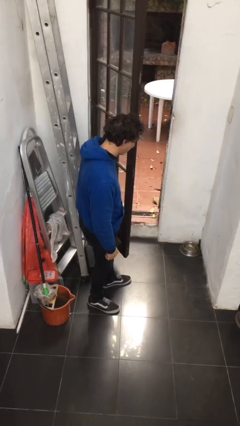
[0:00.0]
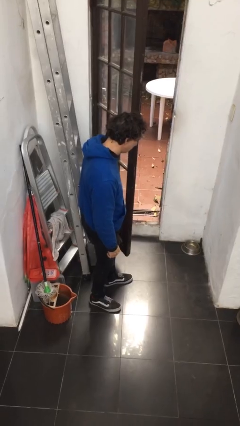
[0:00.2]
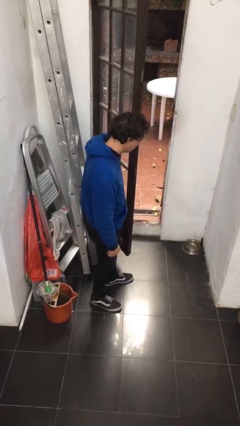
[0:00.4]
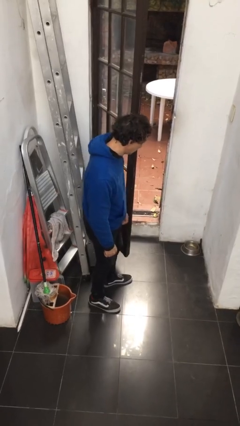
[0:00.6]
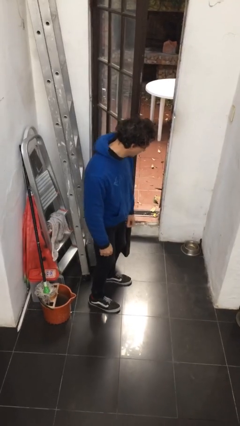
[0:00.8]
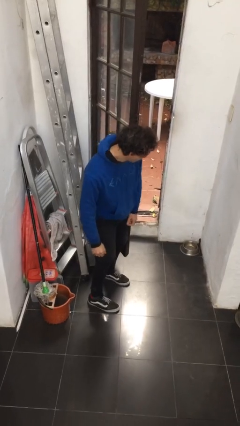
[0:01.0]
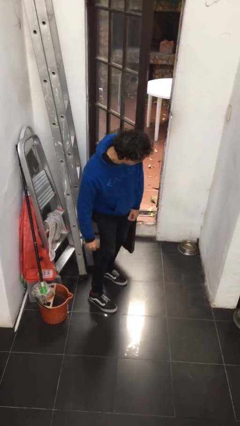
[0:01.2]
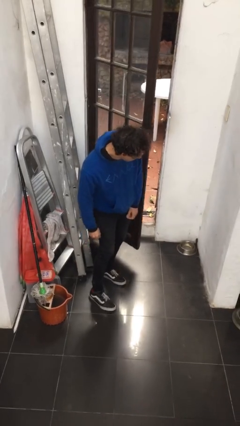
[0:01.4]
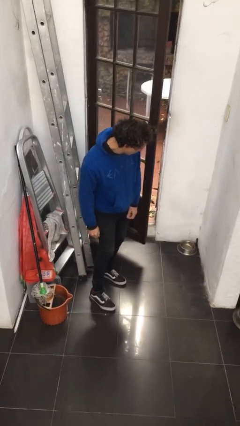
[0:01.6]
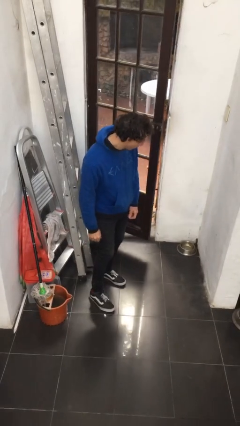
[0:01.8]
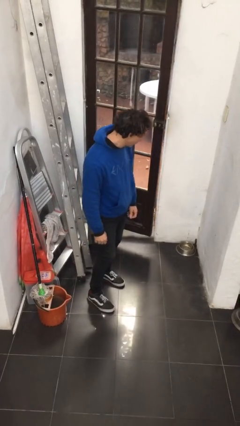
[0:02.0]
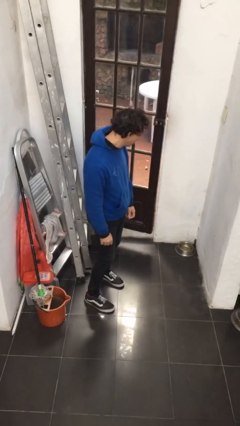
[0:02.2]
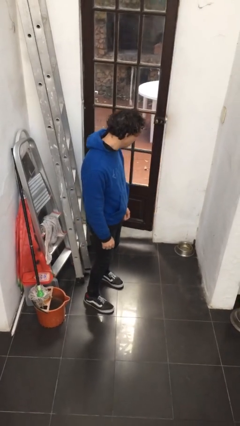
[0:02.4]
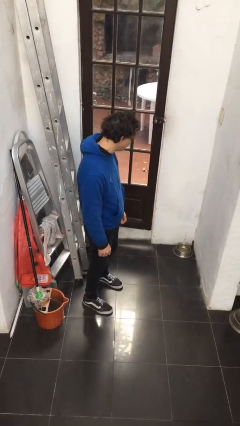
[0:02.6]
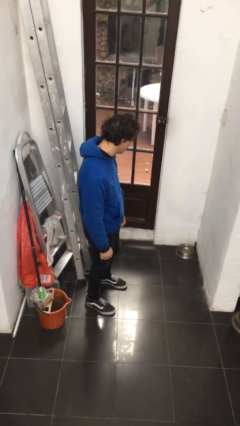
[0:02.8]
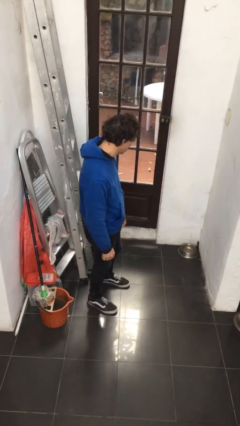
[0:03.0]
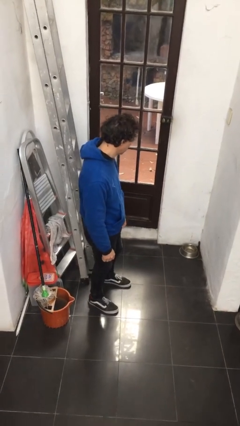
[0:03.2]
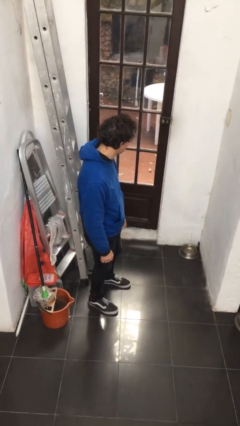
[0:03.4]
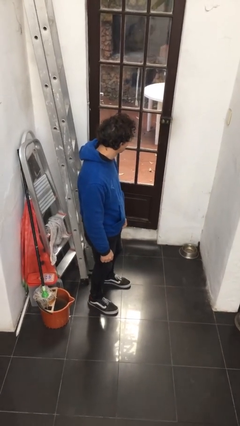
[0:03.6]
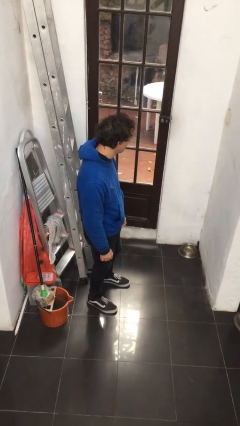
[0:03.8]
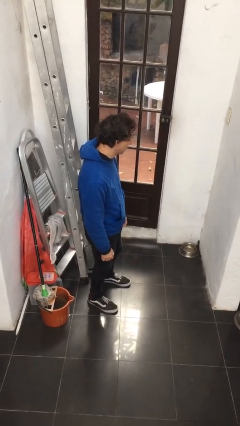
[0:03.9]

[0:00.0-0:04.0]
person closes door with hip

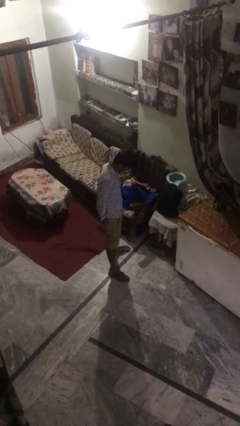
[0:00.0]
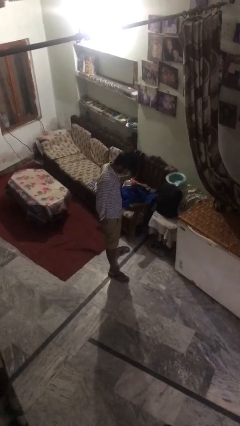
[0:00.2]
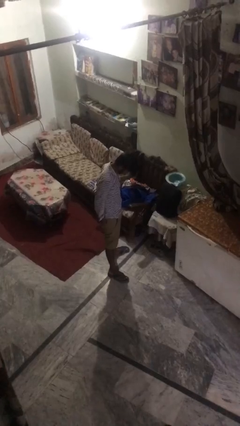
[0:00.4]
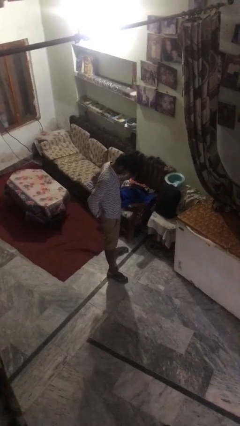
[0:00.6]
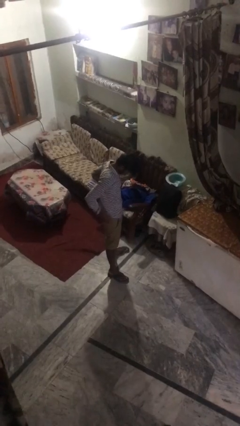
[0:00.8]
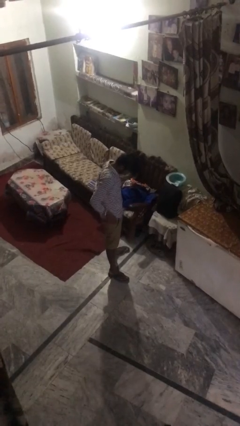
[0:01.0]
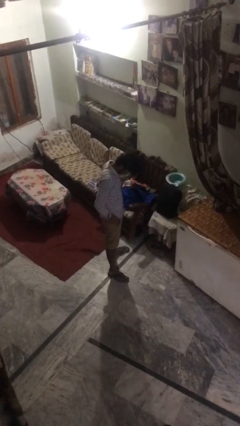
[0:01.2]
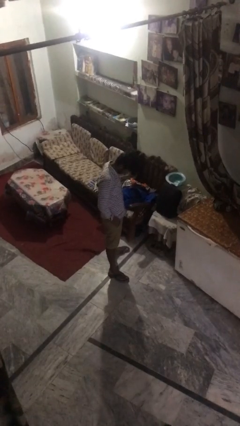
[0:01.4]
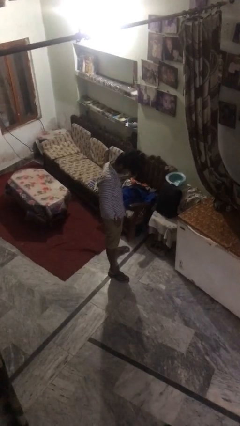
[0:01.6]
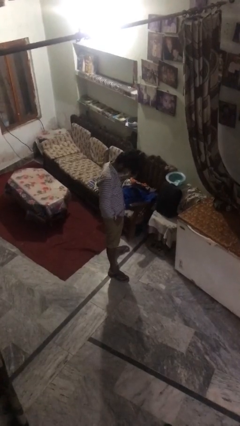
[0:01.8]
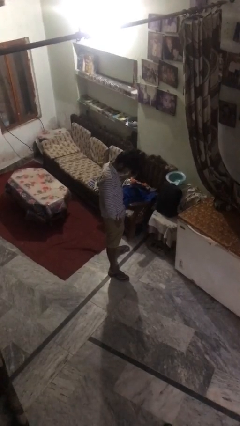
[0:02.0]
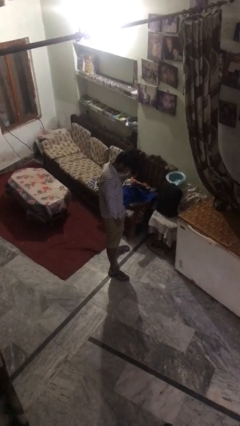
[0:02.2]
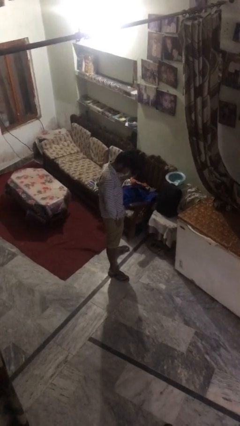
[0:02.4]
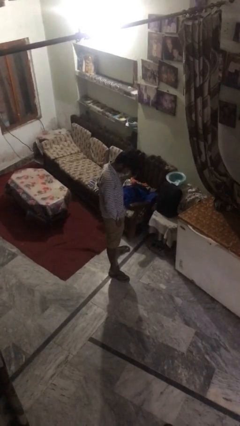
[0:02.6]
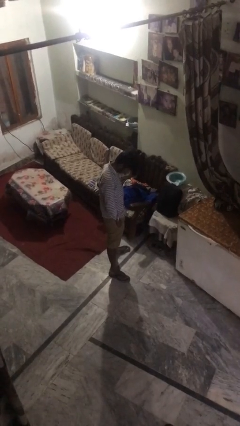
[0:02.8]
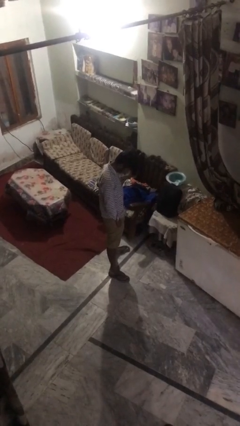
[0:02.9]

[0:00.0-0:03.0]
person puts hands in back pockets

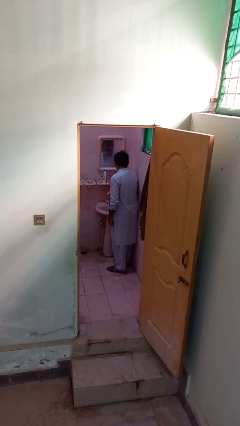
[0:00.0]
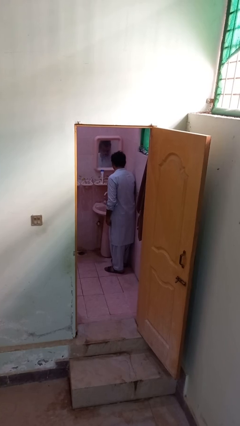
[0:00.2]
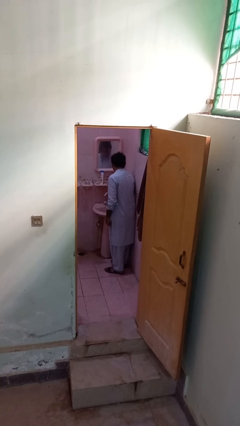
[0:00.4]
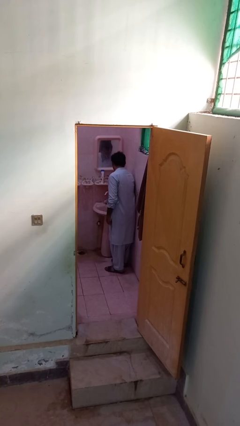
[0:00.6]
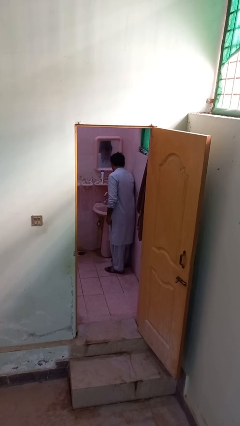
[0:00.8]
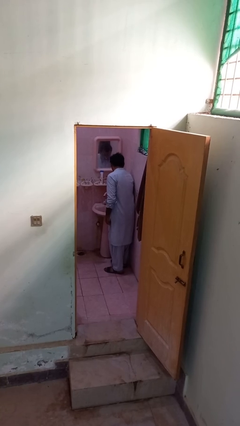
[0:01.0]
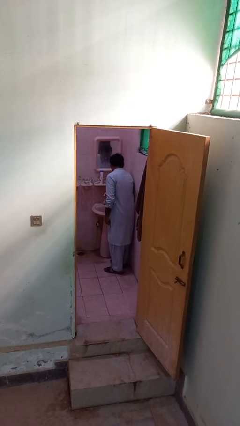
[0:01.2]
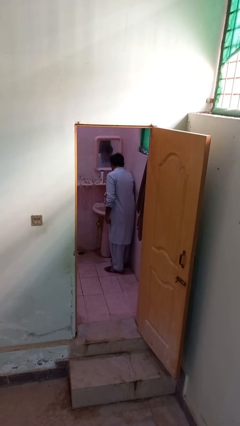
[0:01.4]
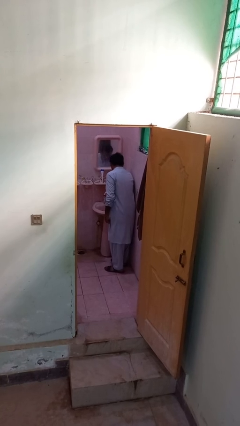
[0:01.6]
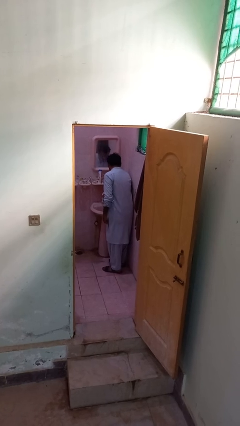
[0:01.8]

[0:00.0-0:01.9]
person turns off faucet

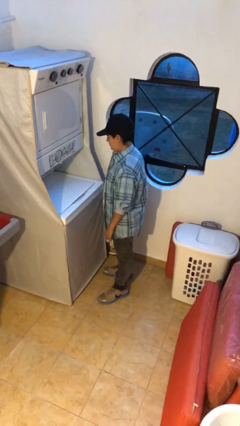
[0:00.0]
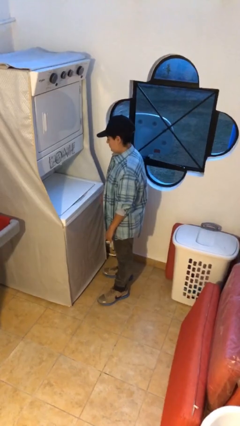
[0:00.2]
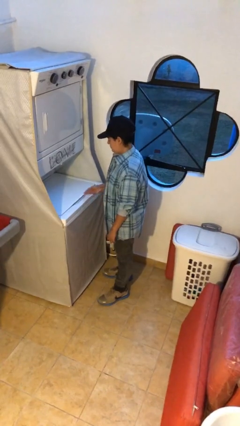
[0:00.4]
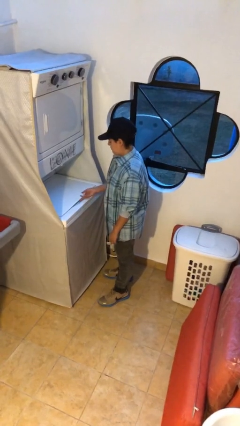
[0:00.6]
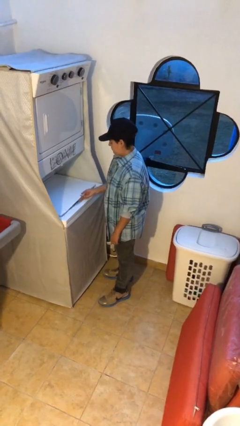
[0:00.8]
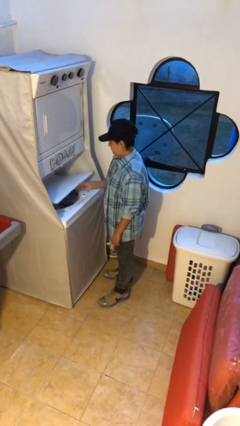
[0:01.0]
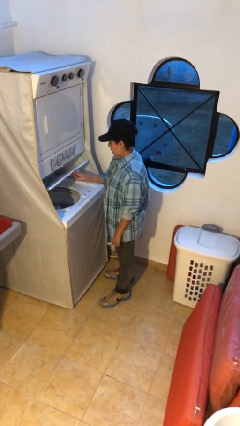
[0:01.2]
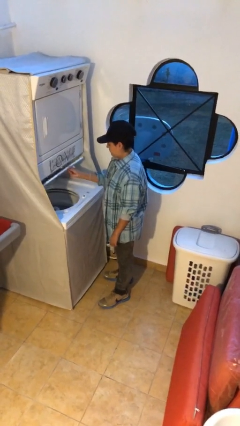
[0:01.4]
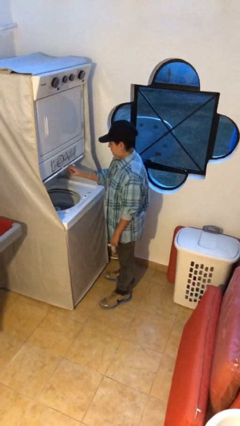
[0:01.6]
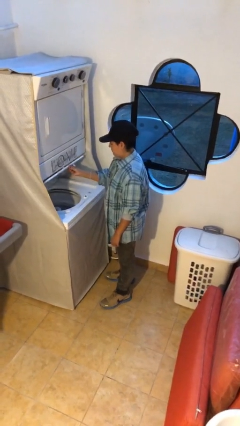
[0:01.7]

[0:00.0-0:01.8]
person opens clothes washer

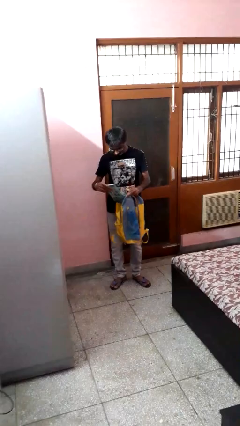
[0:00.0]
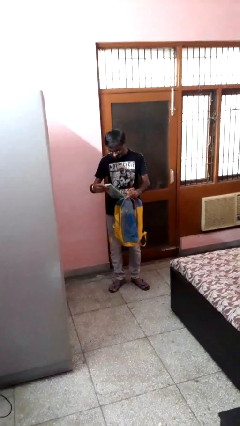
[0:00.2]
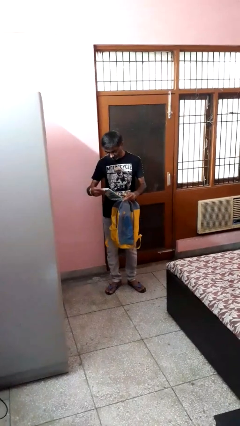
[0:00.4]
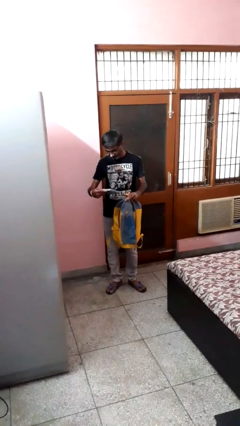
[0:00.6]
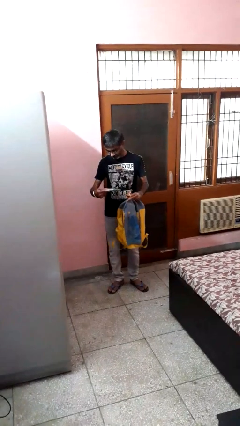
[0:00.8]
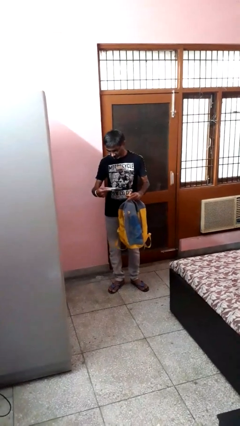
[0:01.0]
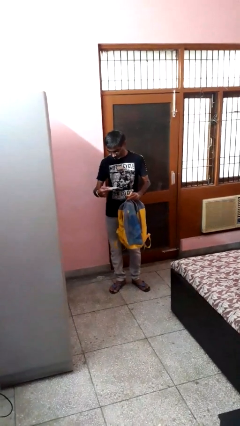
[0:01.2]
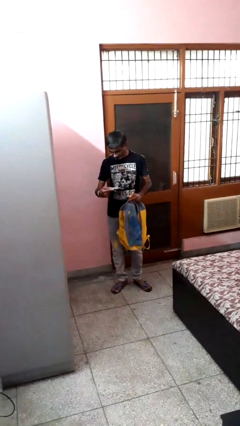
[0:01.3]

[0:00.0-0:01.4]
person takes object from backpack

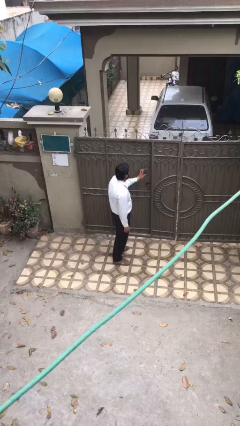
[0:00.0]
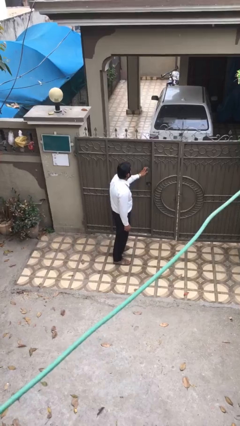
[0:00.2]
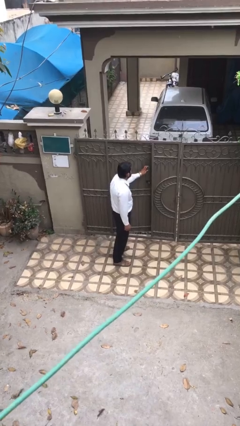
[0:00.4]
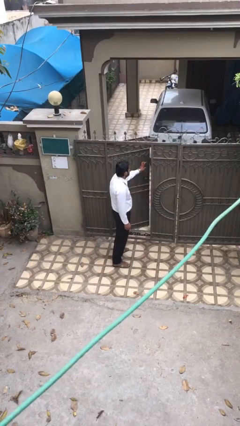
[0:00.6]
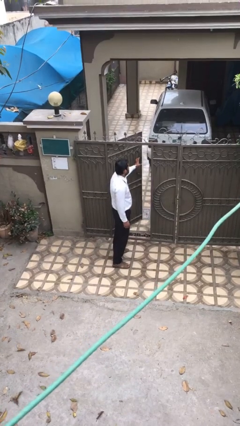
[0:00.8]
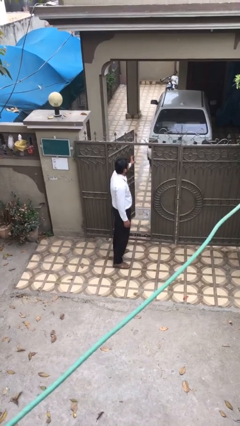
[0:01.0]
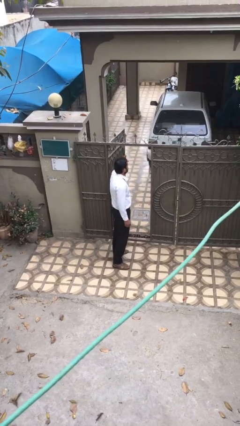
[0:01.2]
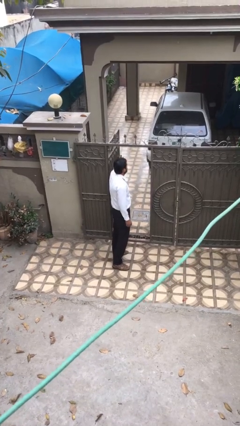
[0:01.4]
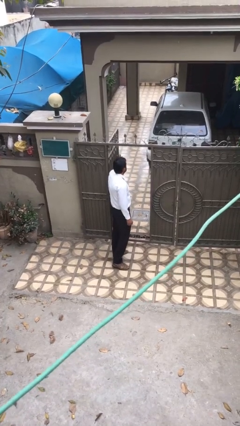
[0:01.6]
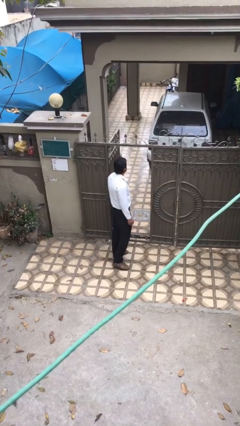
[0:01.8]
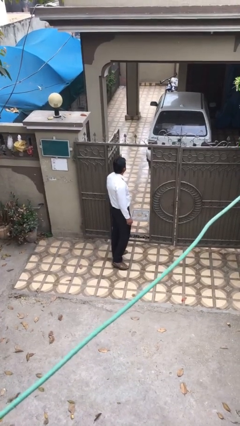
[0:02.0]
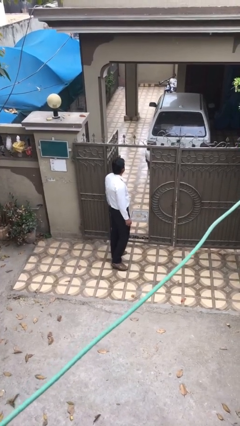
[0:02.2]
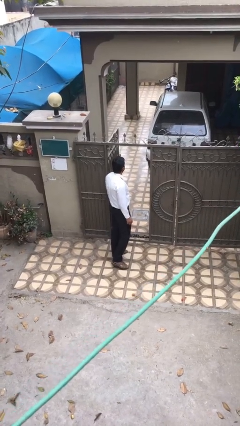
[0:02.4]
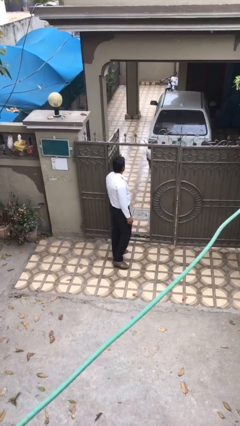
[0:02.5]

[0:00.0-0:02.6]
person opens facility door

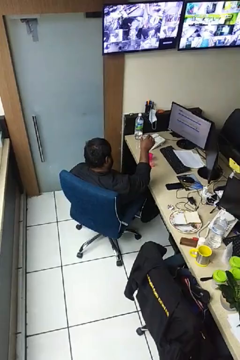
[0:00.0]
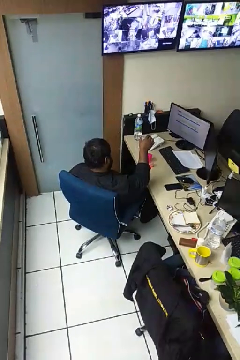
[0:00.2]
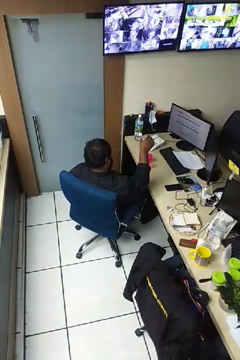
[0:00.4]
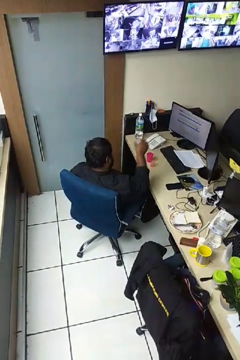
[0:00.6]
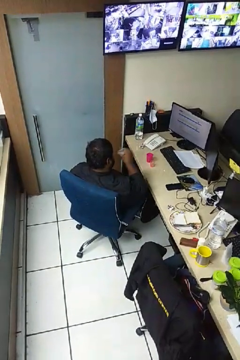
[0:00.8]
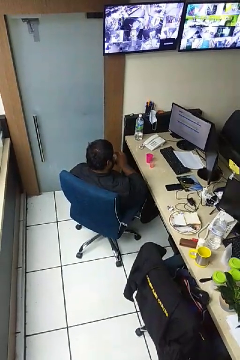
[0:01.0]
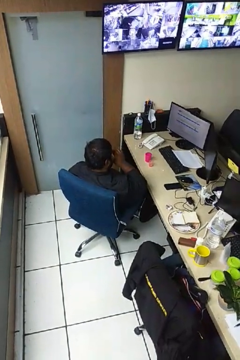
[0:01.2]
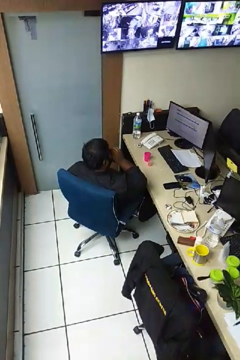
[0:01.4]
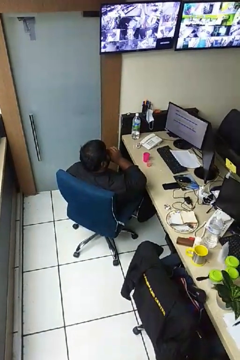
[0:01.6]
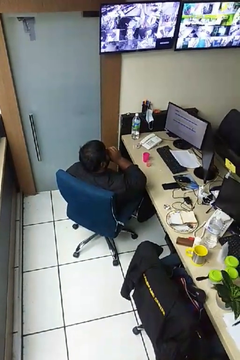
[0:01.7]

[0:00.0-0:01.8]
person drinks from shotglass

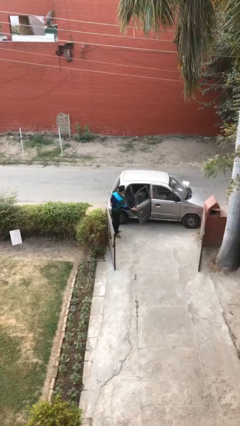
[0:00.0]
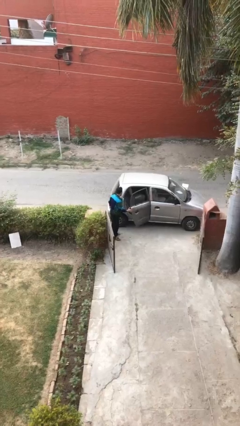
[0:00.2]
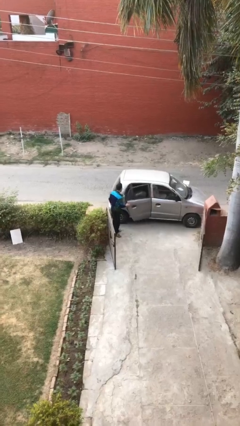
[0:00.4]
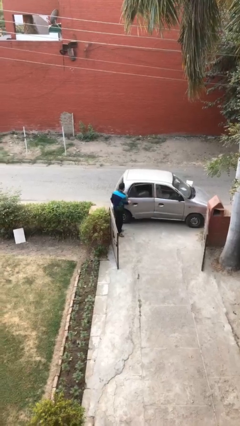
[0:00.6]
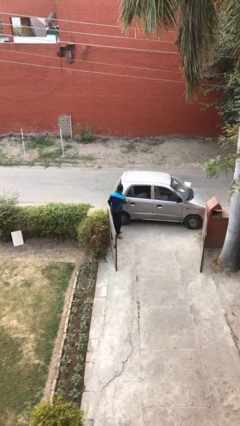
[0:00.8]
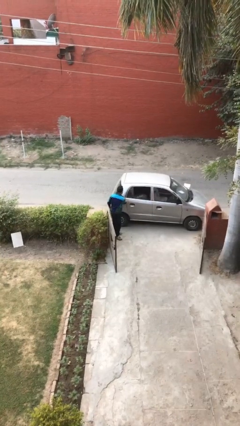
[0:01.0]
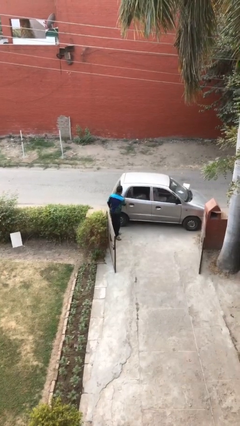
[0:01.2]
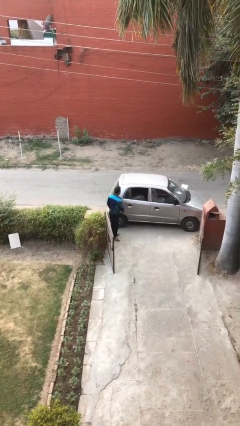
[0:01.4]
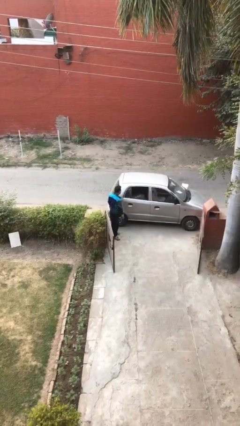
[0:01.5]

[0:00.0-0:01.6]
person closes car door
